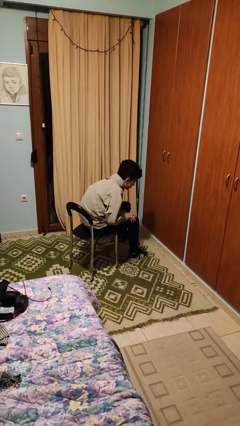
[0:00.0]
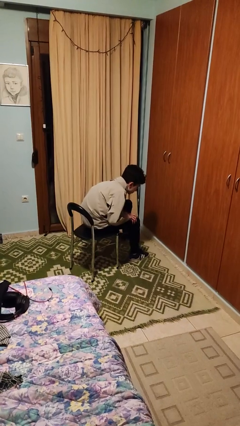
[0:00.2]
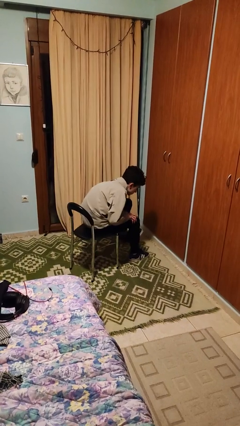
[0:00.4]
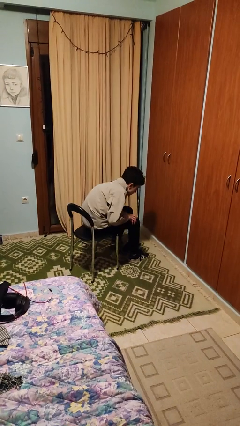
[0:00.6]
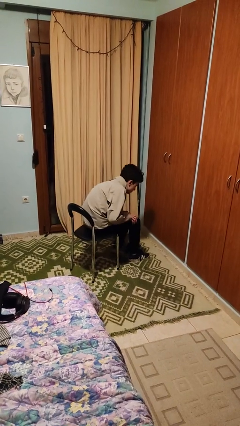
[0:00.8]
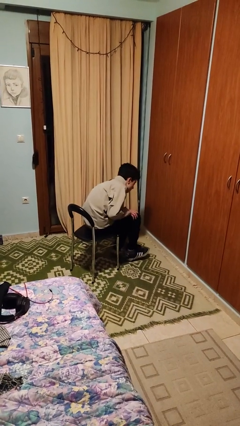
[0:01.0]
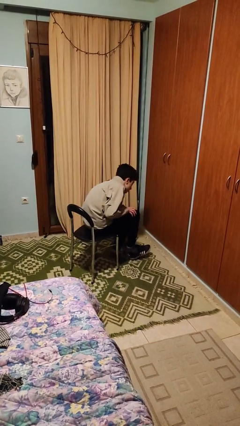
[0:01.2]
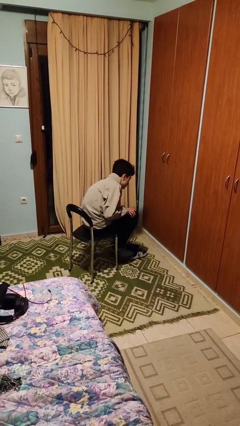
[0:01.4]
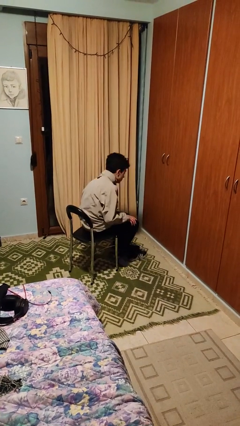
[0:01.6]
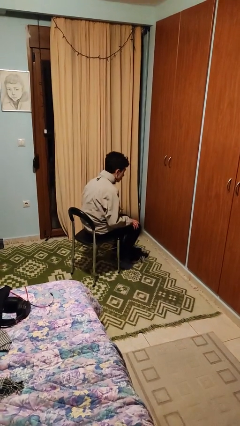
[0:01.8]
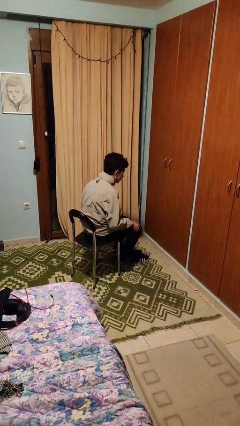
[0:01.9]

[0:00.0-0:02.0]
person takes off shoes

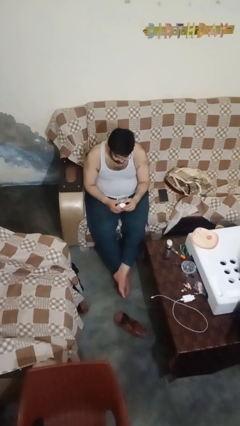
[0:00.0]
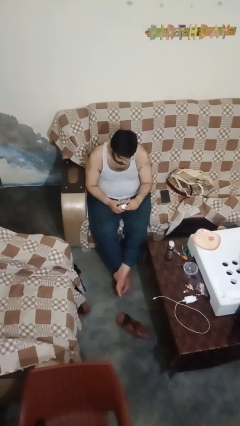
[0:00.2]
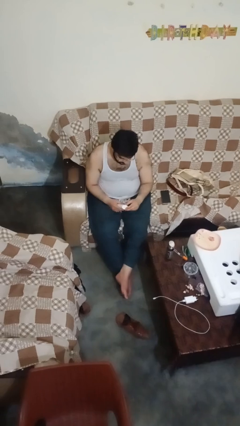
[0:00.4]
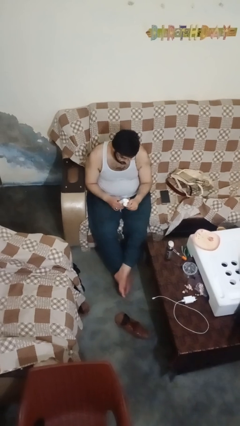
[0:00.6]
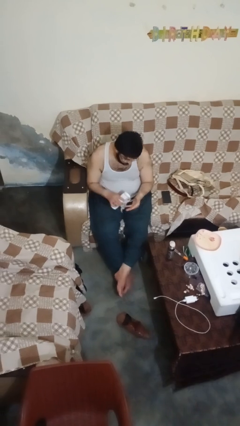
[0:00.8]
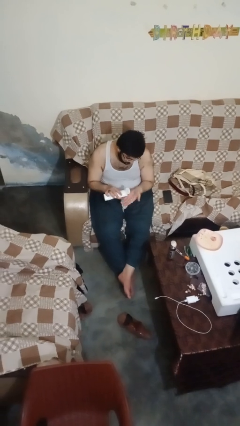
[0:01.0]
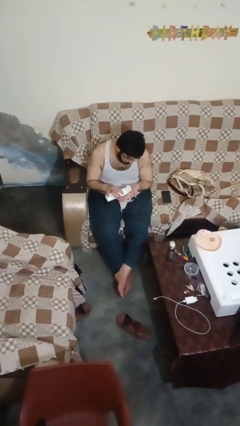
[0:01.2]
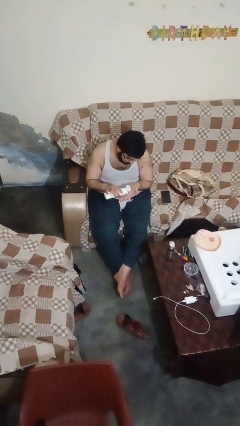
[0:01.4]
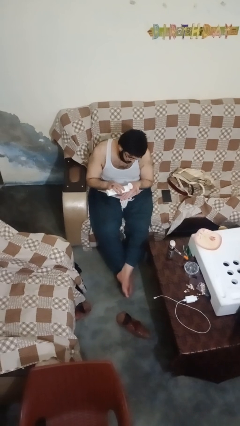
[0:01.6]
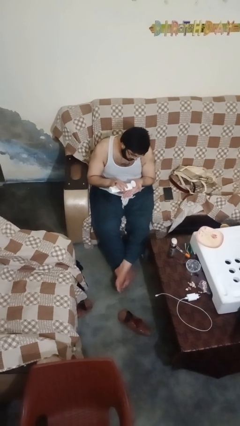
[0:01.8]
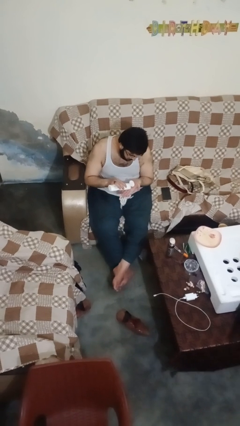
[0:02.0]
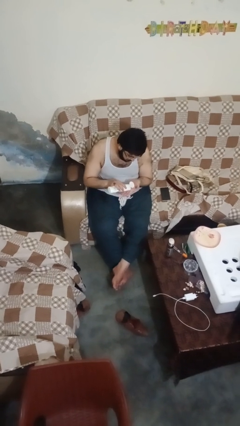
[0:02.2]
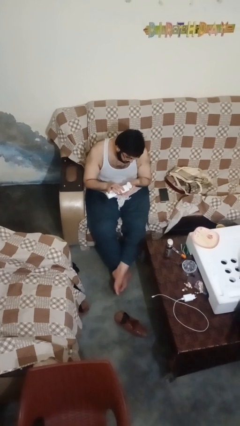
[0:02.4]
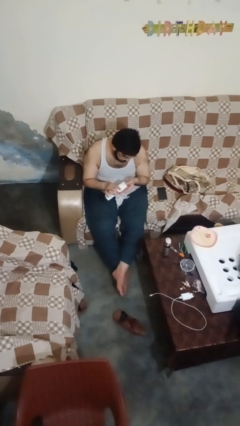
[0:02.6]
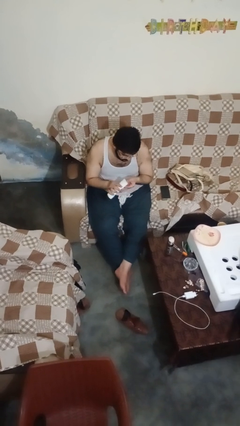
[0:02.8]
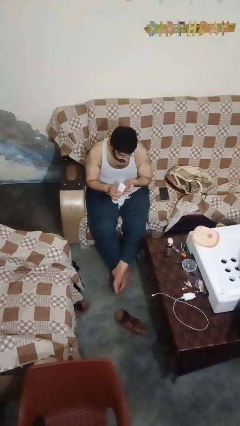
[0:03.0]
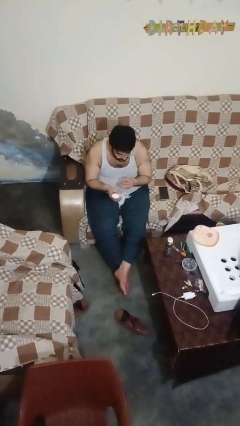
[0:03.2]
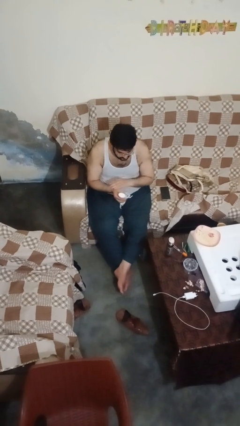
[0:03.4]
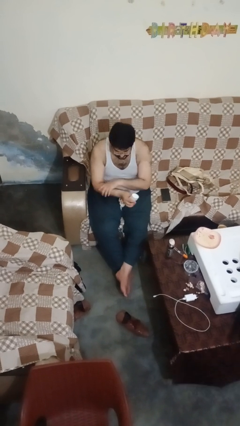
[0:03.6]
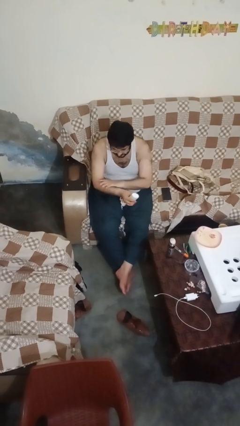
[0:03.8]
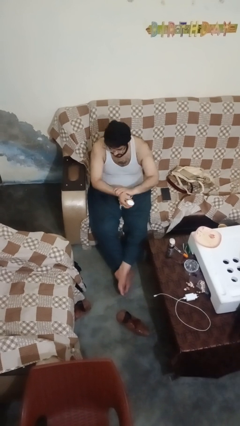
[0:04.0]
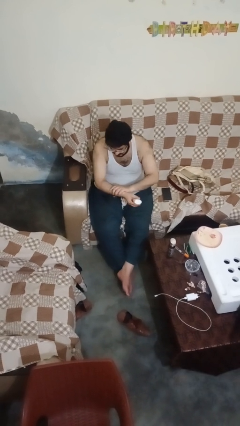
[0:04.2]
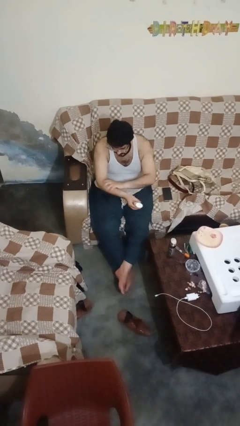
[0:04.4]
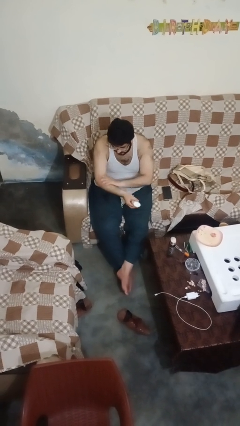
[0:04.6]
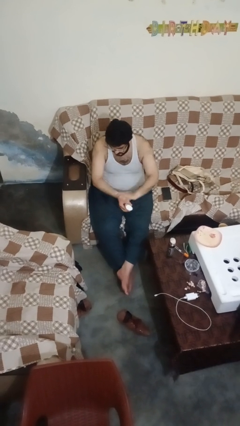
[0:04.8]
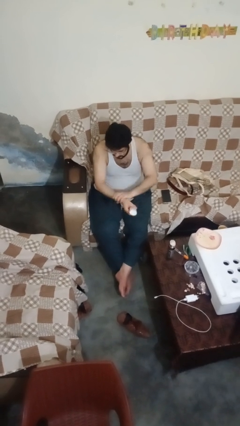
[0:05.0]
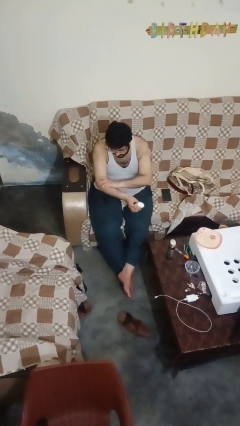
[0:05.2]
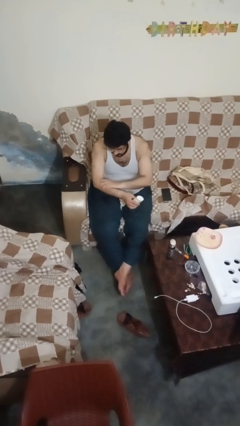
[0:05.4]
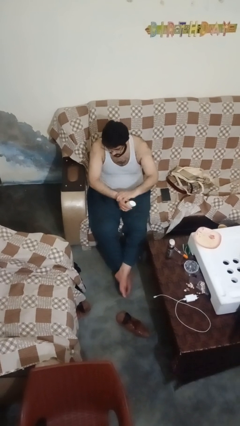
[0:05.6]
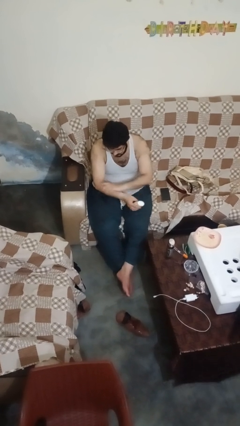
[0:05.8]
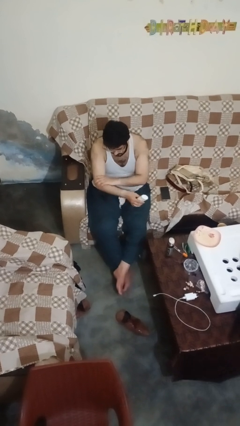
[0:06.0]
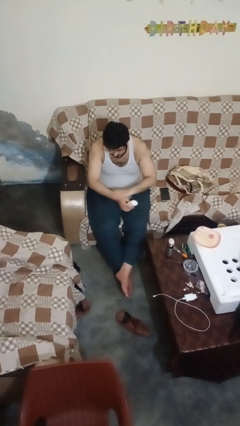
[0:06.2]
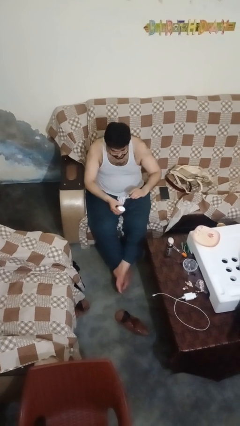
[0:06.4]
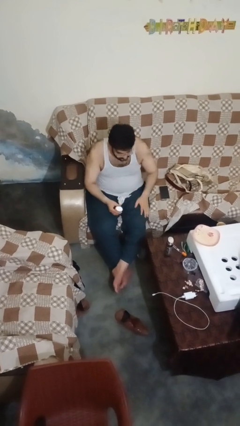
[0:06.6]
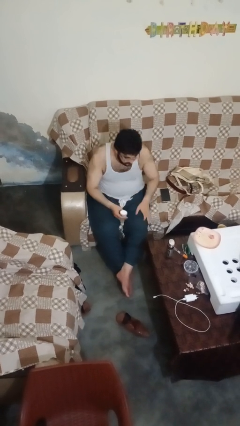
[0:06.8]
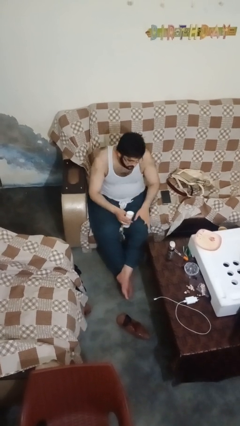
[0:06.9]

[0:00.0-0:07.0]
person applies sunscreen

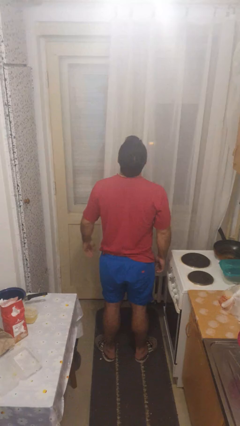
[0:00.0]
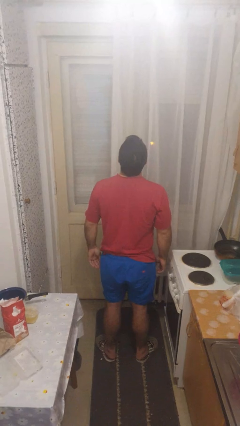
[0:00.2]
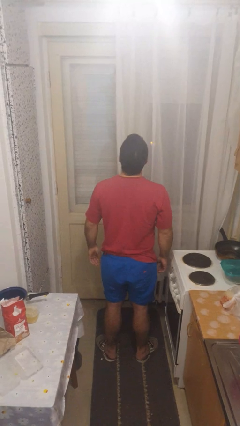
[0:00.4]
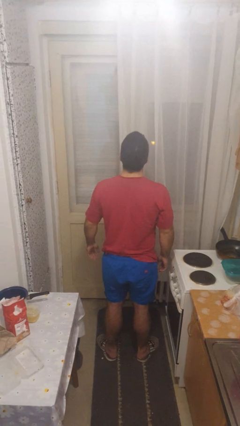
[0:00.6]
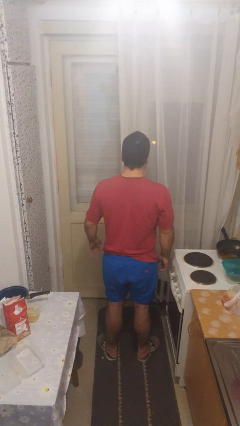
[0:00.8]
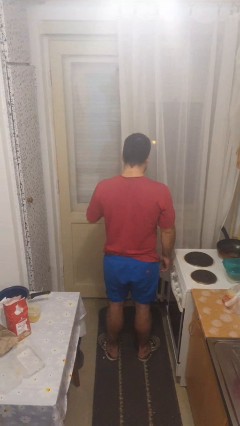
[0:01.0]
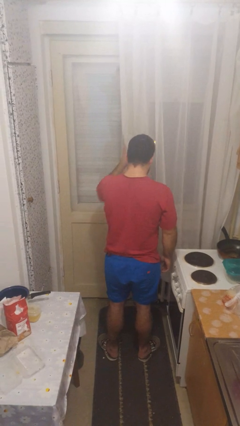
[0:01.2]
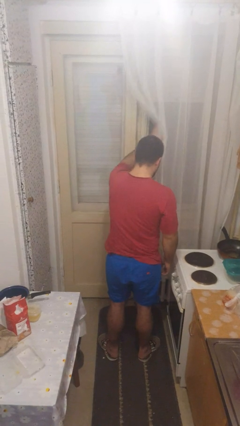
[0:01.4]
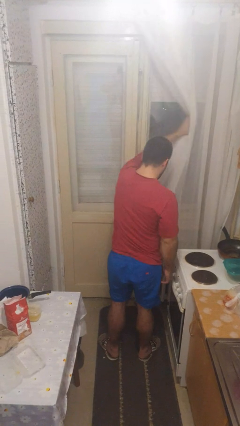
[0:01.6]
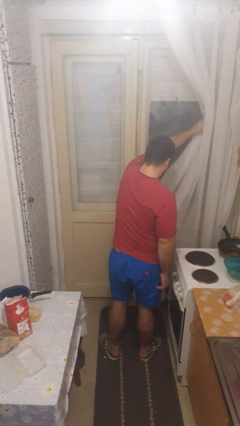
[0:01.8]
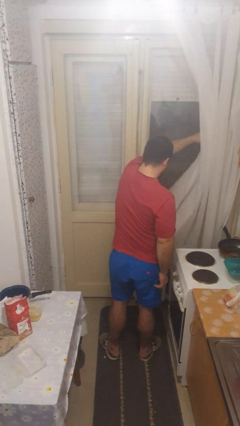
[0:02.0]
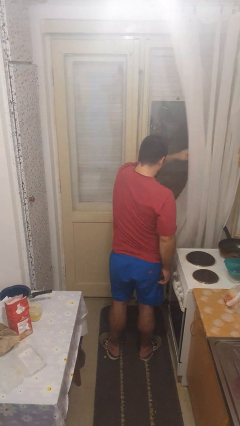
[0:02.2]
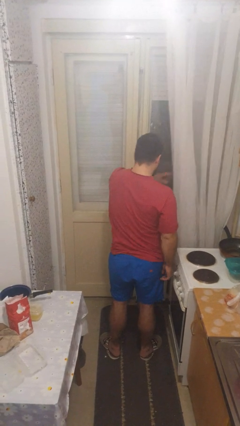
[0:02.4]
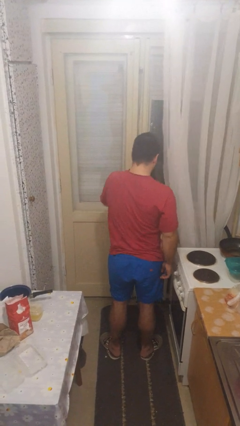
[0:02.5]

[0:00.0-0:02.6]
person opens curtains

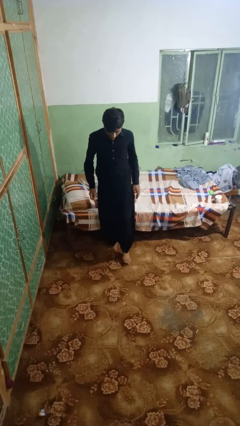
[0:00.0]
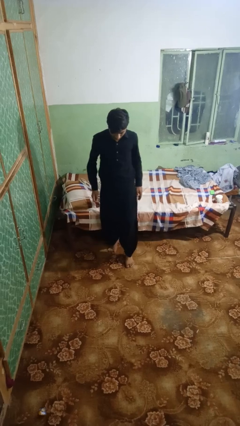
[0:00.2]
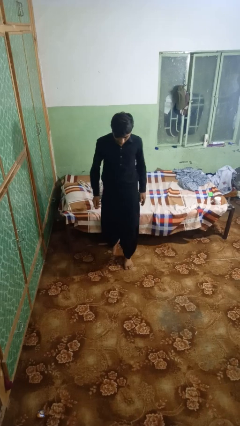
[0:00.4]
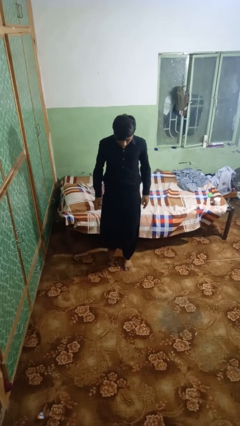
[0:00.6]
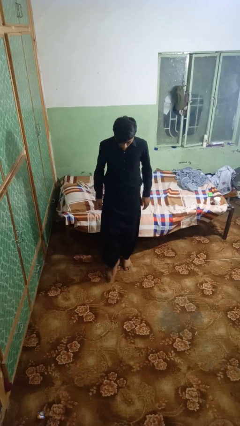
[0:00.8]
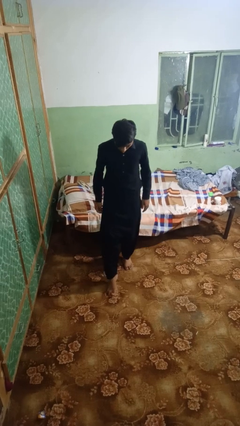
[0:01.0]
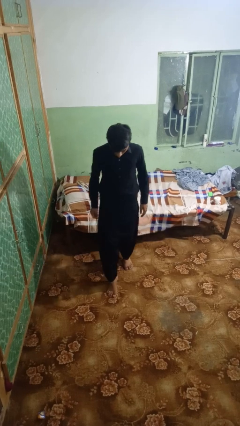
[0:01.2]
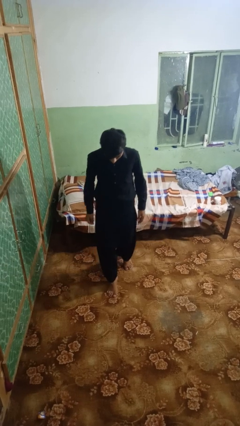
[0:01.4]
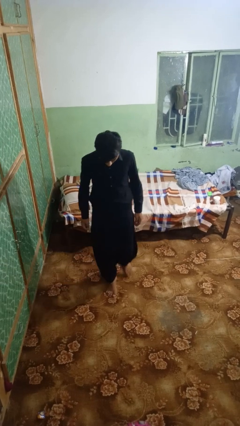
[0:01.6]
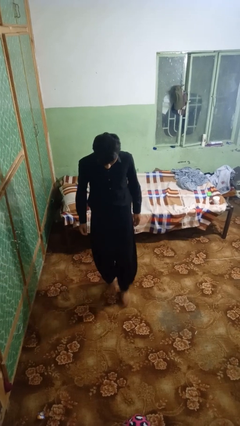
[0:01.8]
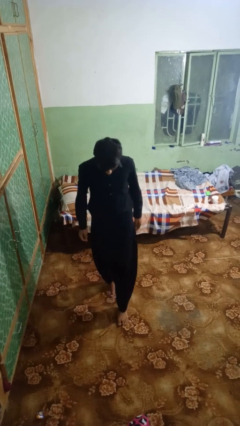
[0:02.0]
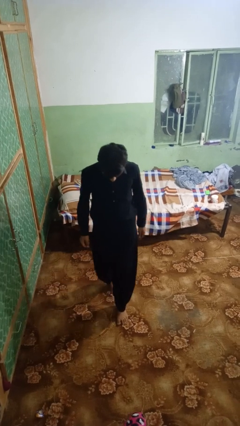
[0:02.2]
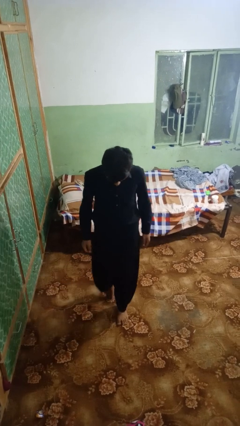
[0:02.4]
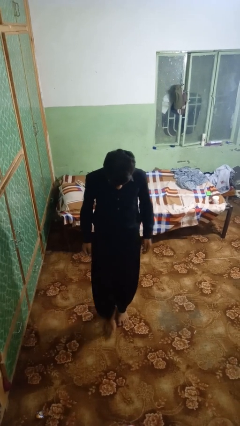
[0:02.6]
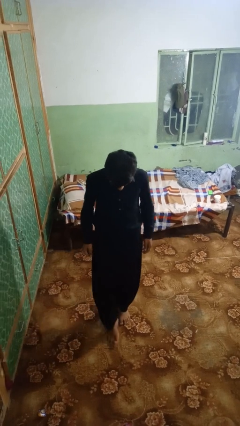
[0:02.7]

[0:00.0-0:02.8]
person walks tiptoe

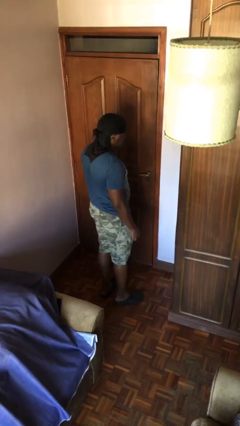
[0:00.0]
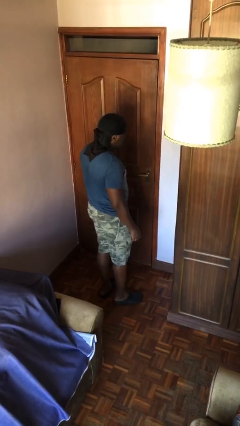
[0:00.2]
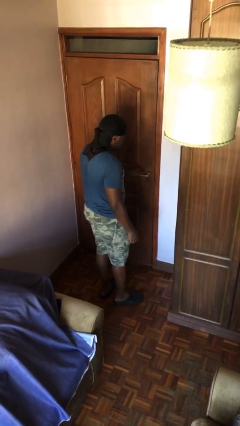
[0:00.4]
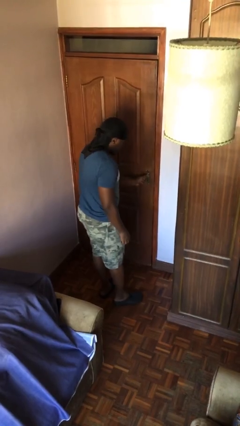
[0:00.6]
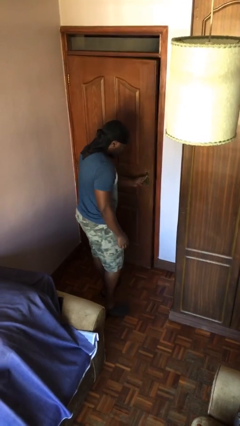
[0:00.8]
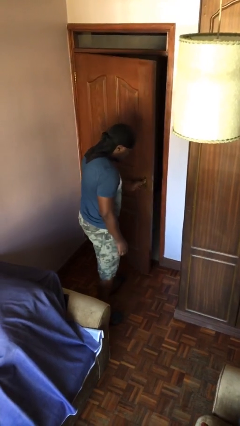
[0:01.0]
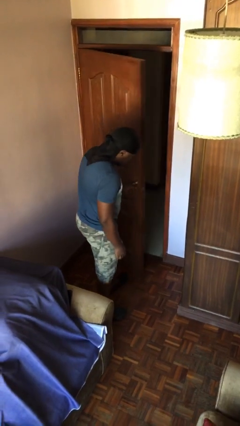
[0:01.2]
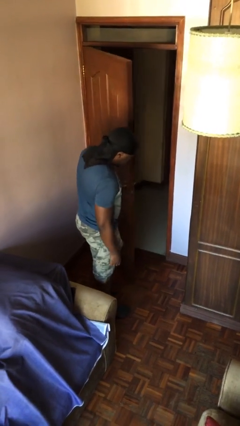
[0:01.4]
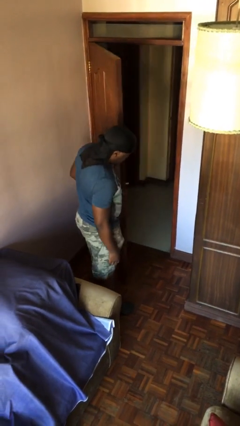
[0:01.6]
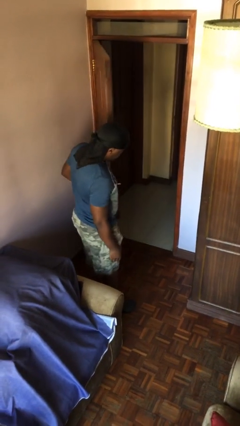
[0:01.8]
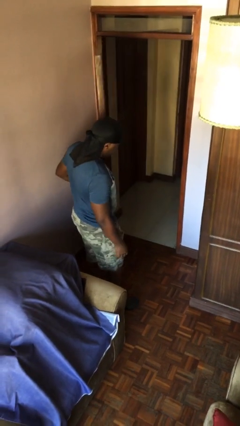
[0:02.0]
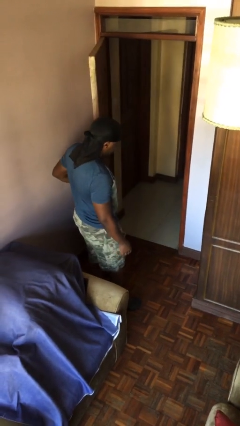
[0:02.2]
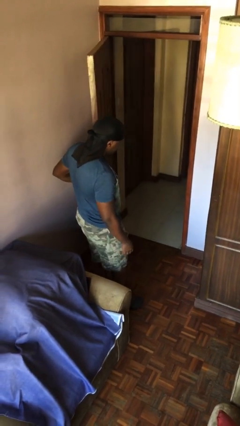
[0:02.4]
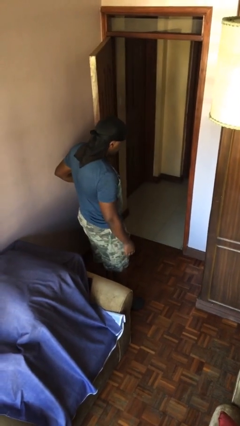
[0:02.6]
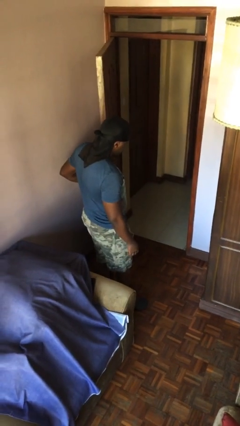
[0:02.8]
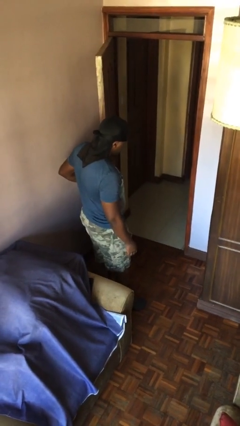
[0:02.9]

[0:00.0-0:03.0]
person opens facility door

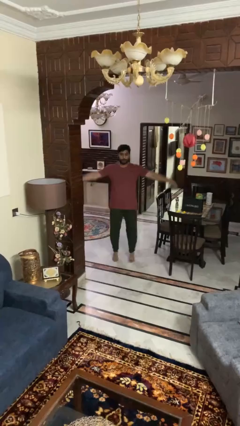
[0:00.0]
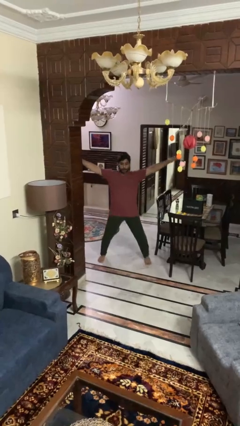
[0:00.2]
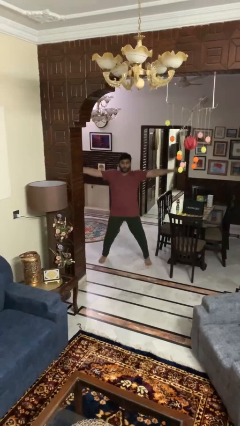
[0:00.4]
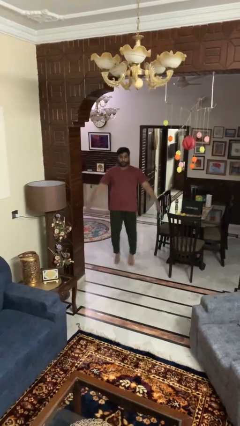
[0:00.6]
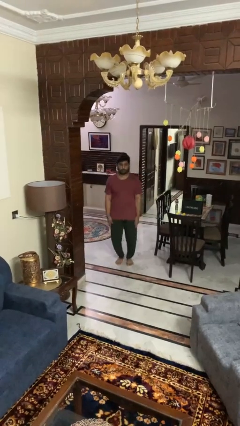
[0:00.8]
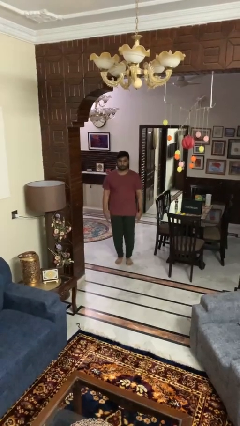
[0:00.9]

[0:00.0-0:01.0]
person exercises with jumping jacks
